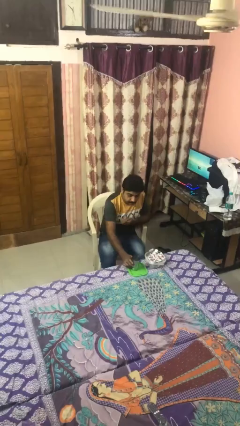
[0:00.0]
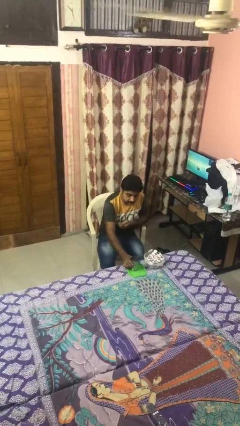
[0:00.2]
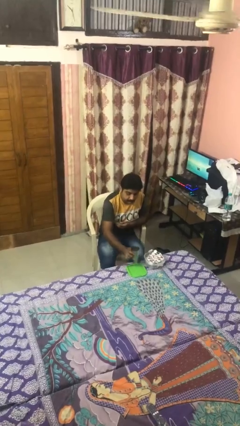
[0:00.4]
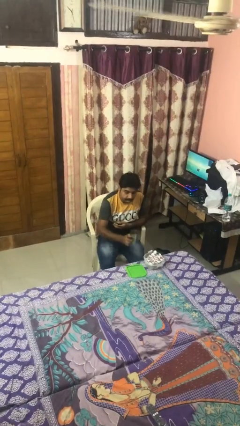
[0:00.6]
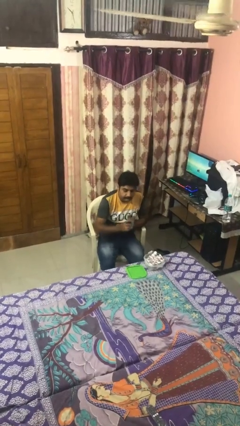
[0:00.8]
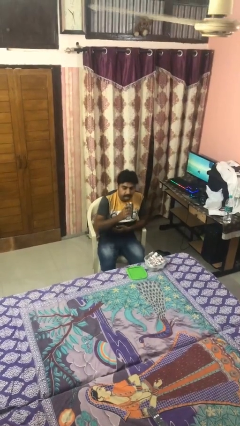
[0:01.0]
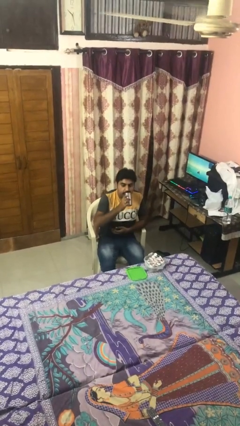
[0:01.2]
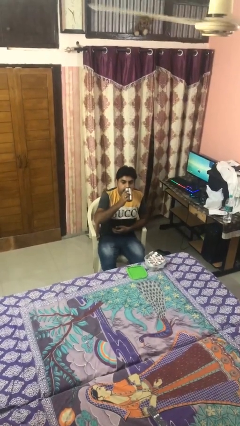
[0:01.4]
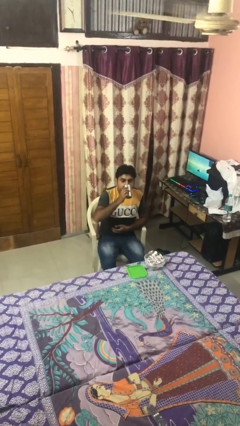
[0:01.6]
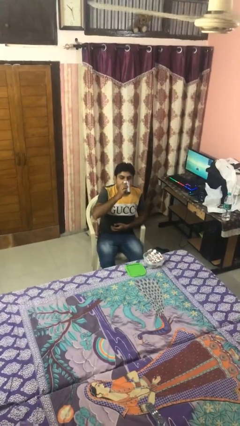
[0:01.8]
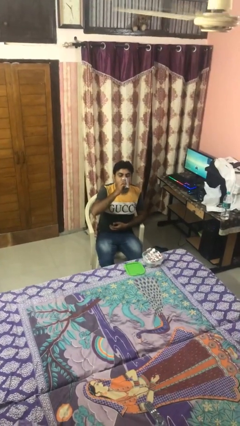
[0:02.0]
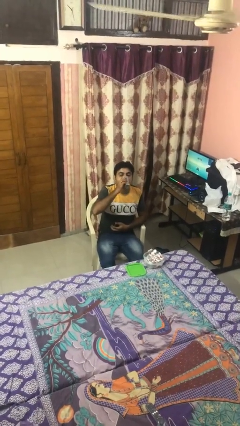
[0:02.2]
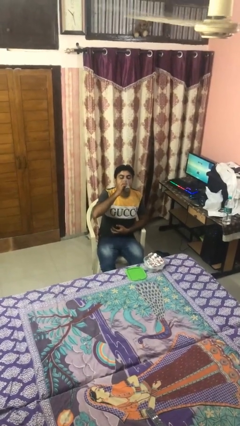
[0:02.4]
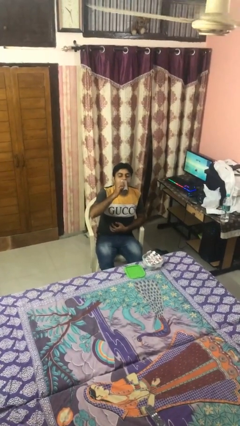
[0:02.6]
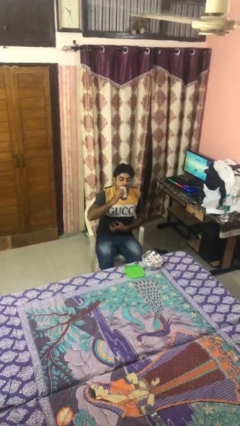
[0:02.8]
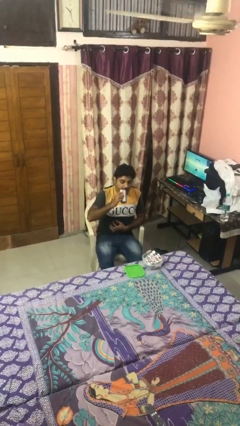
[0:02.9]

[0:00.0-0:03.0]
person drinks from cup

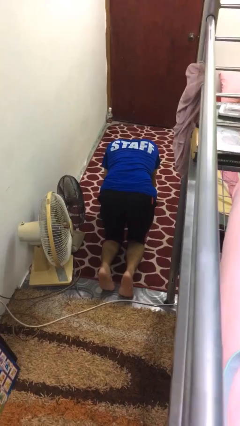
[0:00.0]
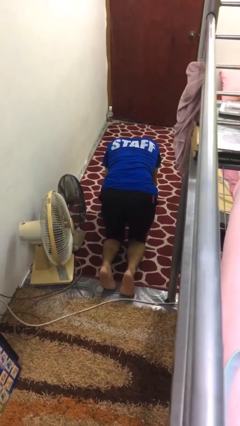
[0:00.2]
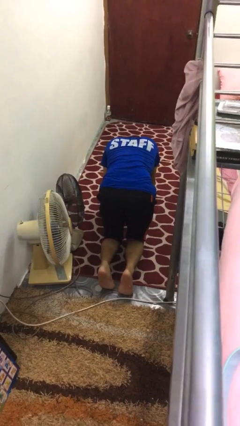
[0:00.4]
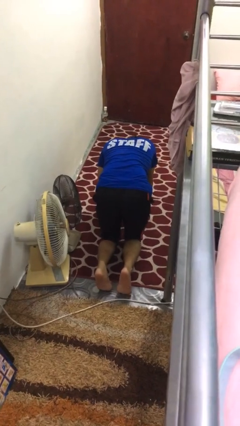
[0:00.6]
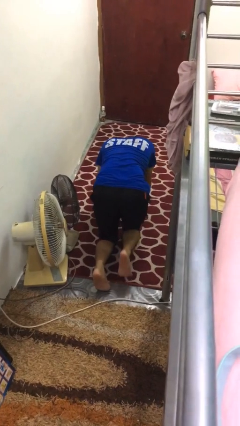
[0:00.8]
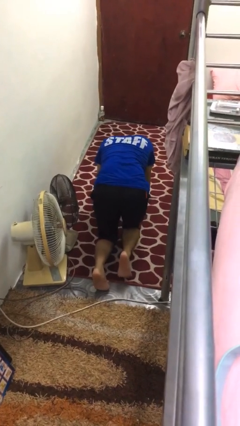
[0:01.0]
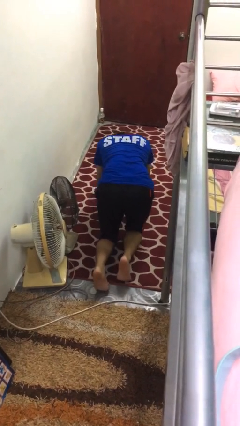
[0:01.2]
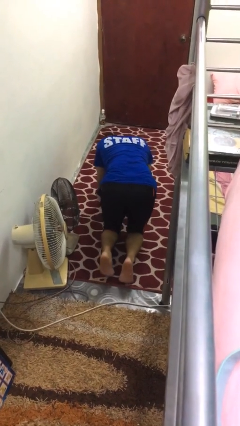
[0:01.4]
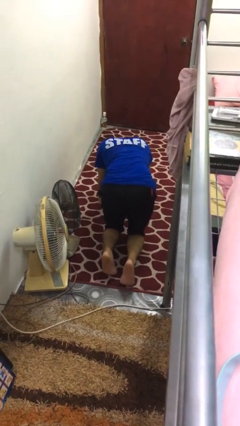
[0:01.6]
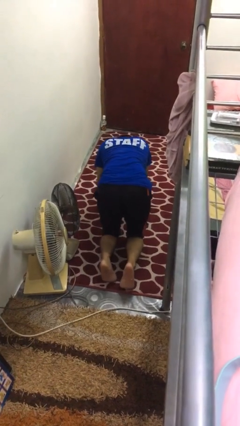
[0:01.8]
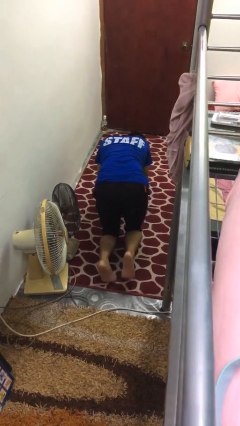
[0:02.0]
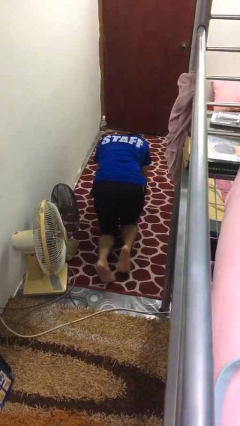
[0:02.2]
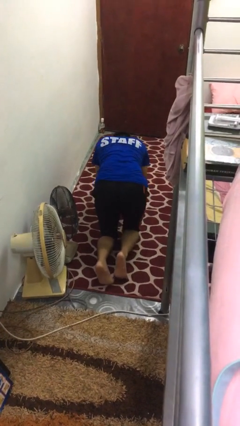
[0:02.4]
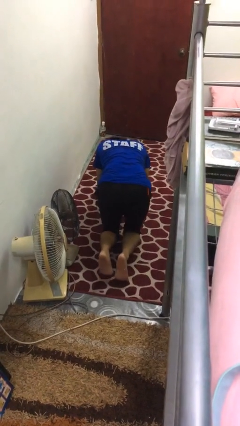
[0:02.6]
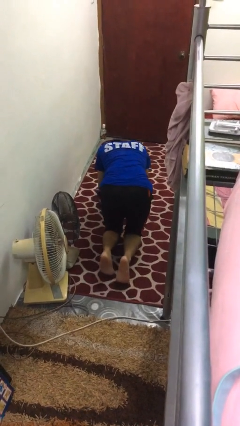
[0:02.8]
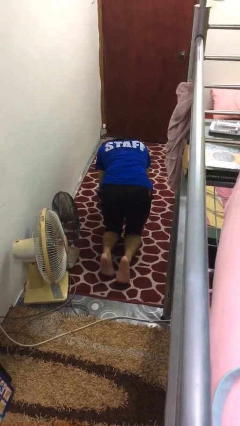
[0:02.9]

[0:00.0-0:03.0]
person crawls

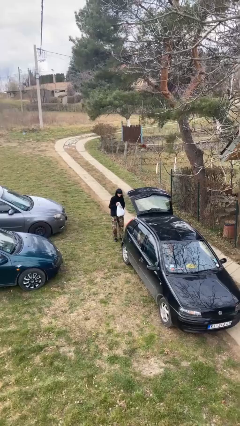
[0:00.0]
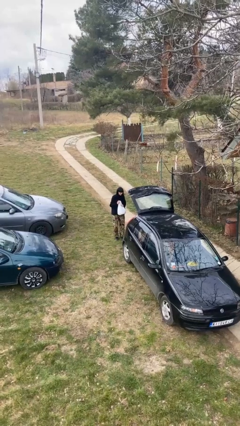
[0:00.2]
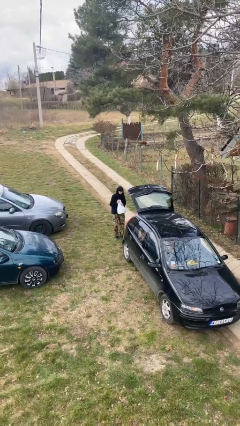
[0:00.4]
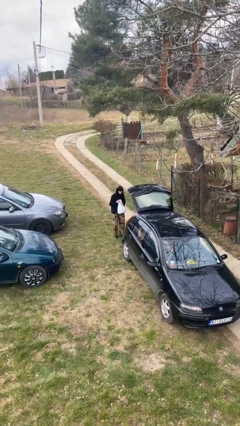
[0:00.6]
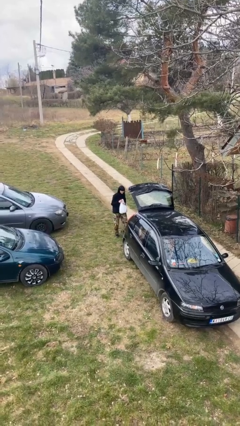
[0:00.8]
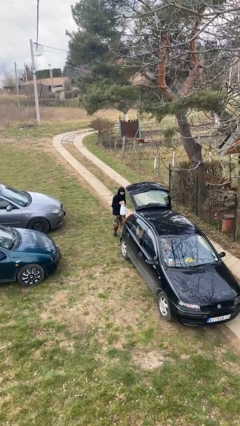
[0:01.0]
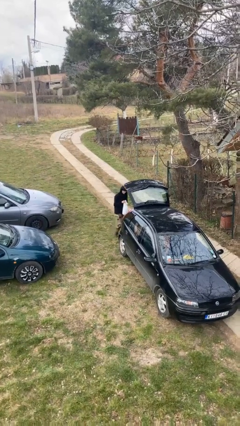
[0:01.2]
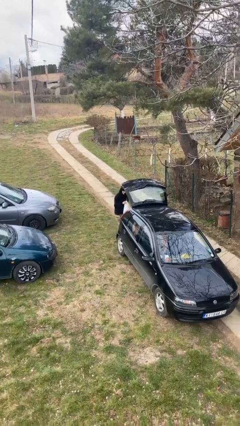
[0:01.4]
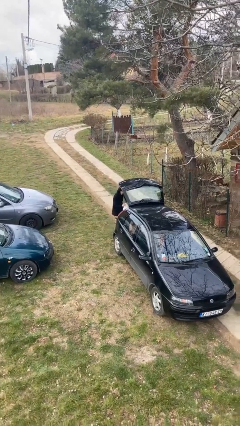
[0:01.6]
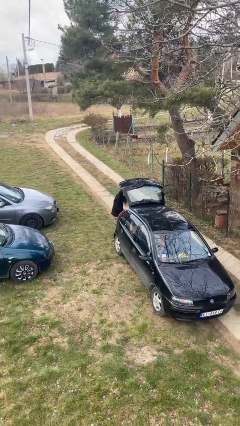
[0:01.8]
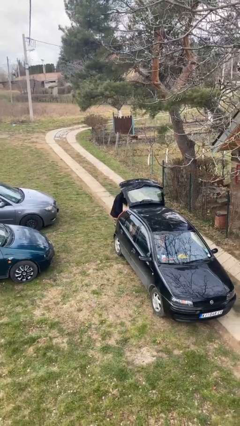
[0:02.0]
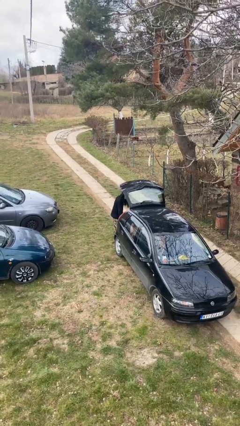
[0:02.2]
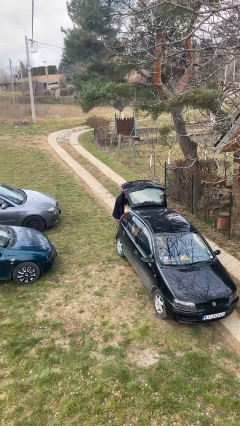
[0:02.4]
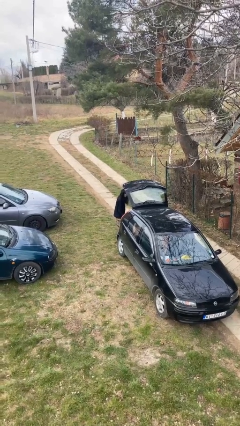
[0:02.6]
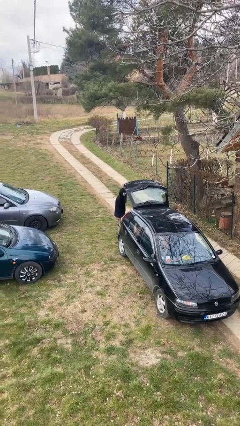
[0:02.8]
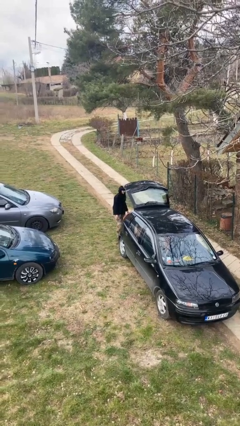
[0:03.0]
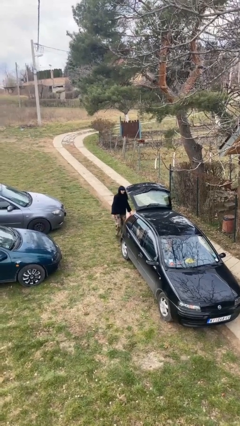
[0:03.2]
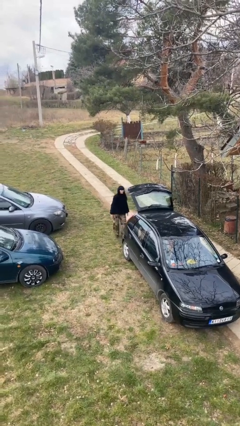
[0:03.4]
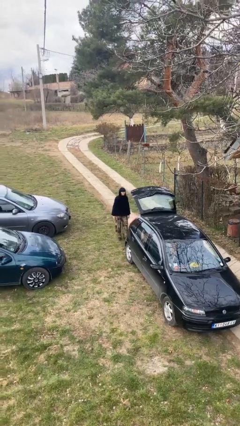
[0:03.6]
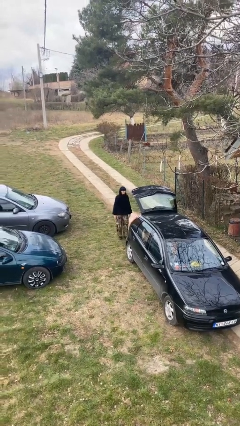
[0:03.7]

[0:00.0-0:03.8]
person loads car

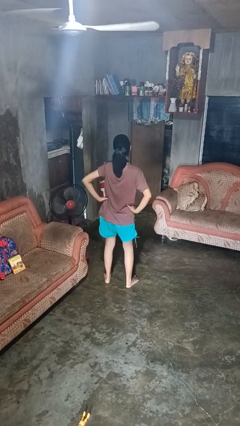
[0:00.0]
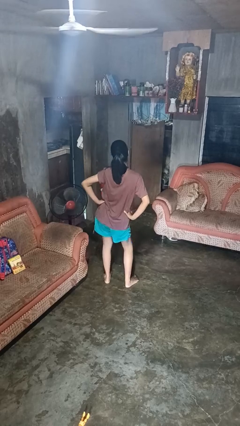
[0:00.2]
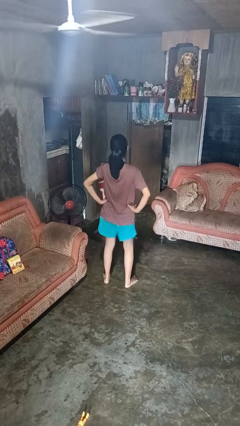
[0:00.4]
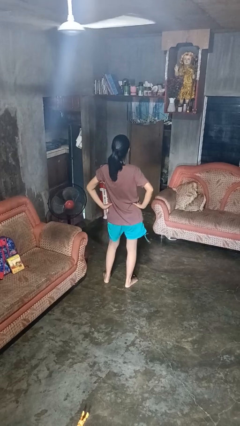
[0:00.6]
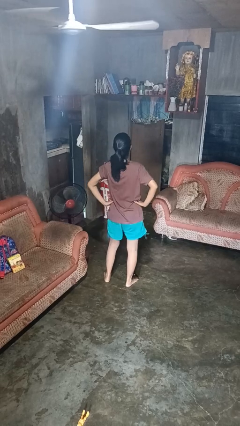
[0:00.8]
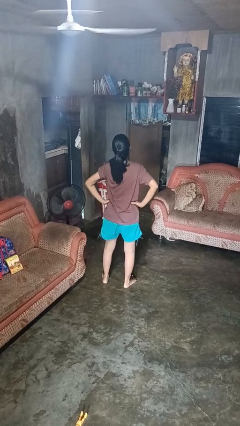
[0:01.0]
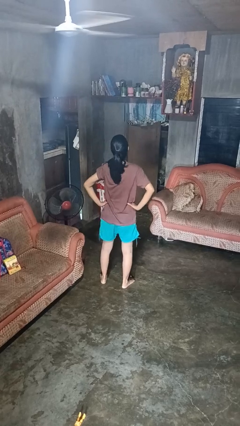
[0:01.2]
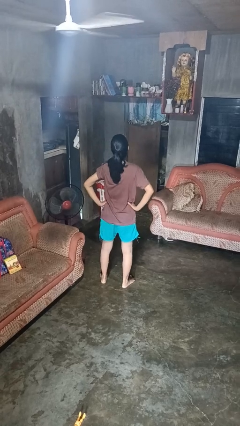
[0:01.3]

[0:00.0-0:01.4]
person dances in place

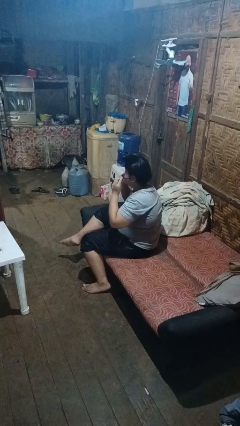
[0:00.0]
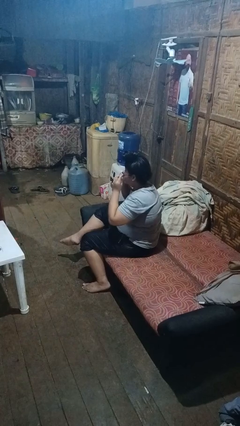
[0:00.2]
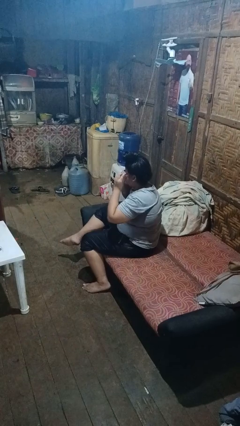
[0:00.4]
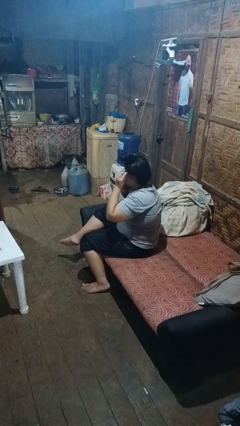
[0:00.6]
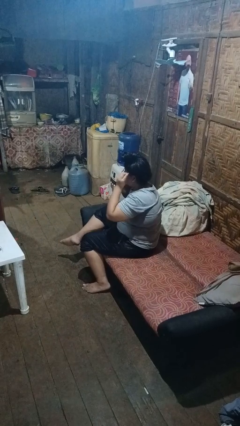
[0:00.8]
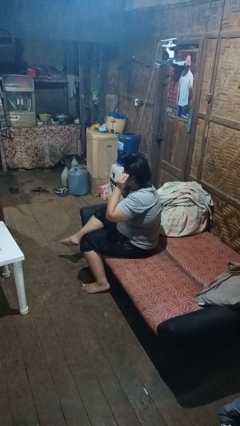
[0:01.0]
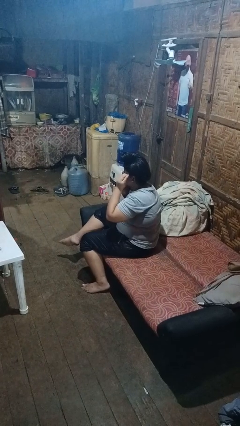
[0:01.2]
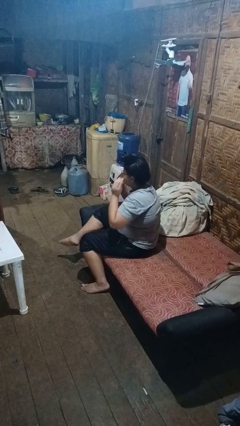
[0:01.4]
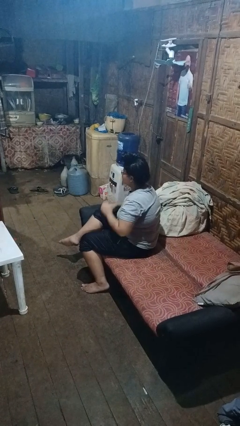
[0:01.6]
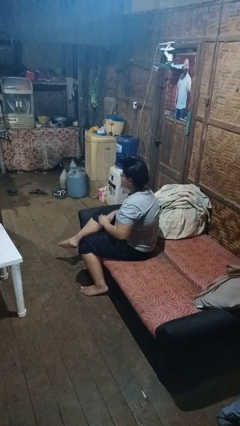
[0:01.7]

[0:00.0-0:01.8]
person puts on glasses

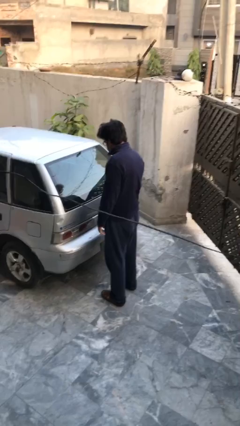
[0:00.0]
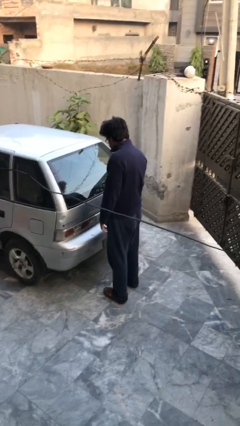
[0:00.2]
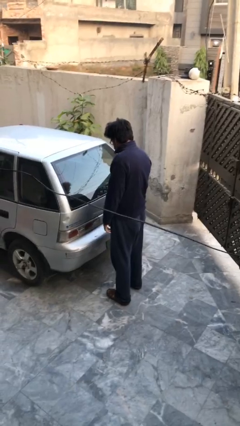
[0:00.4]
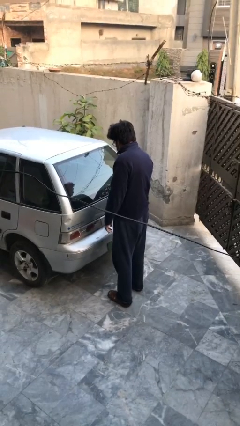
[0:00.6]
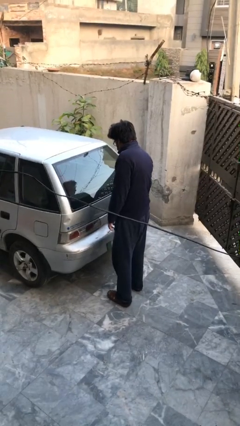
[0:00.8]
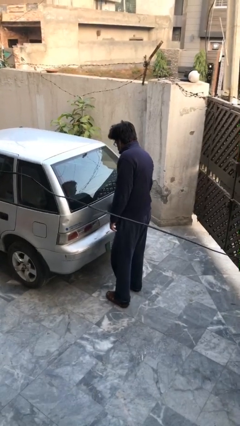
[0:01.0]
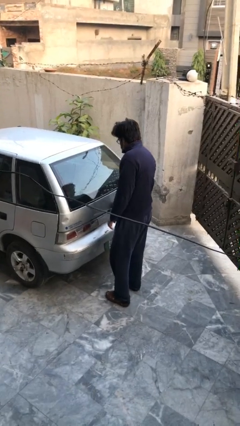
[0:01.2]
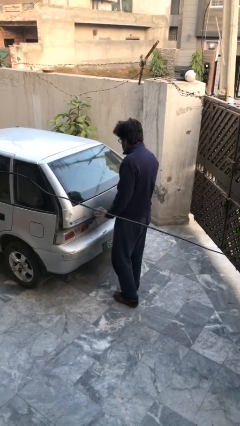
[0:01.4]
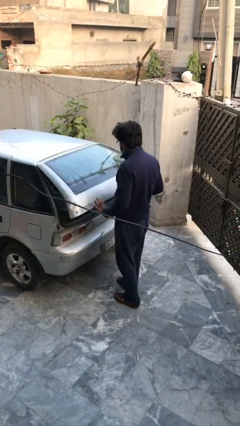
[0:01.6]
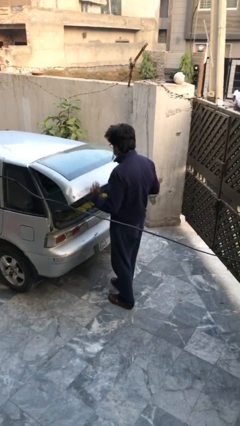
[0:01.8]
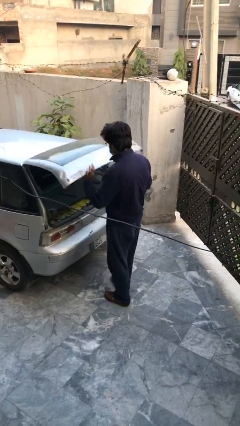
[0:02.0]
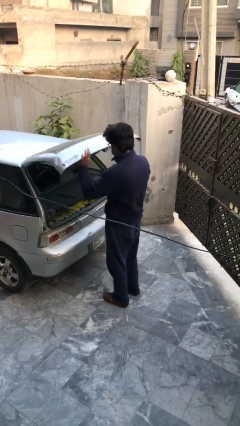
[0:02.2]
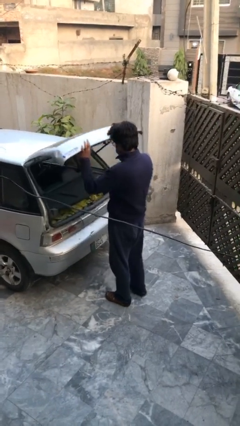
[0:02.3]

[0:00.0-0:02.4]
person opens car trunk

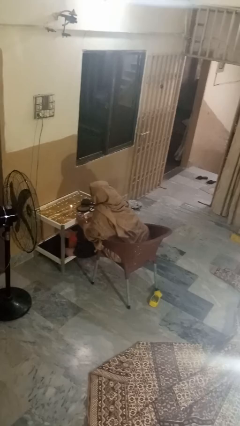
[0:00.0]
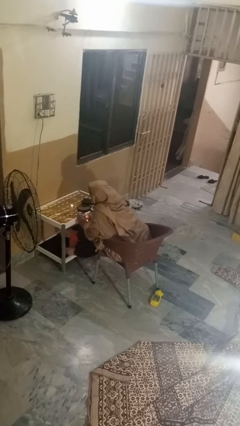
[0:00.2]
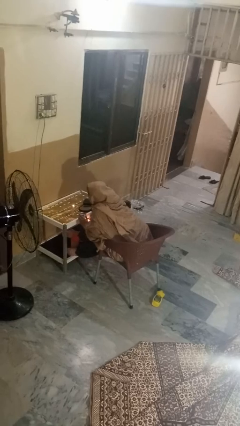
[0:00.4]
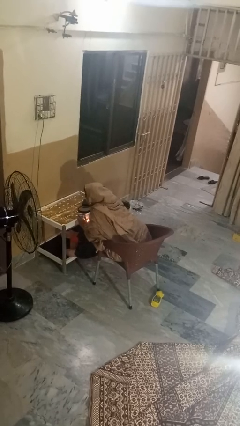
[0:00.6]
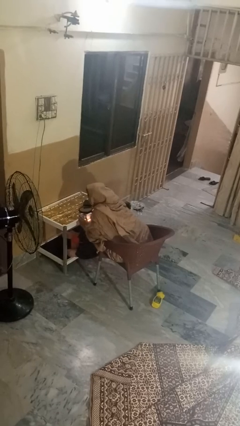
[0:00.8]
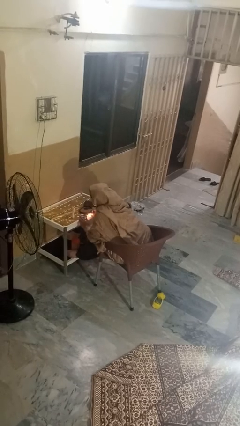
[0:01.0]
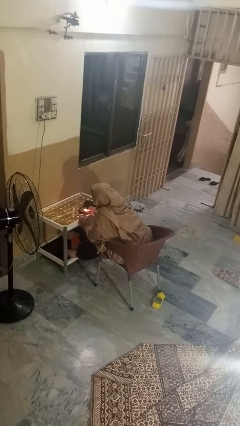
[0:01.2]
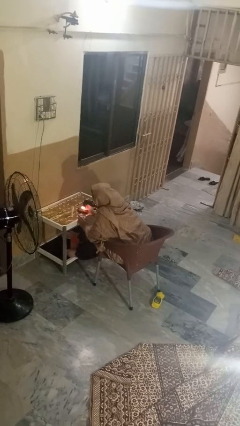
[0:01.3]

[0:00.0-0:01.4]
person extinguishes candle

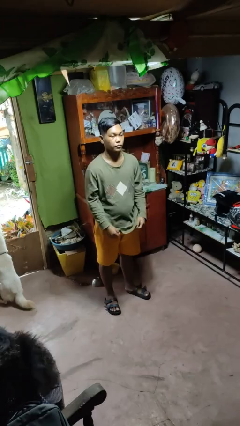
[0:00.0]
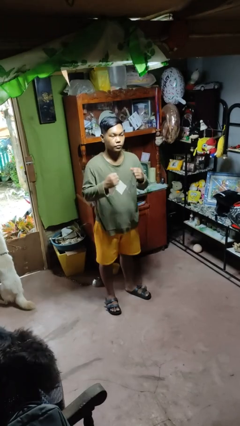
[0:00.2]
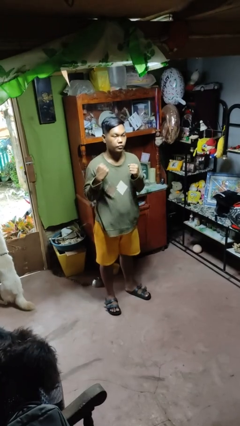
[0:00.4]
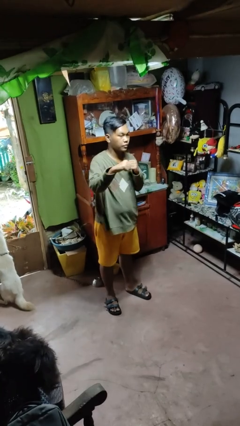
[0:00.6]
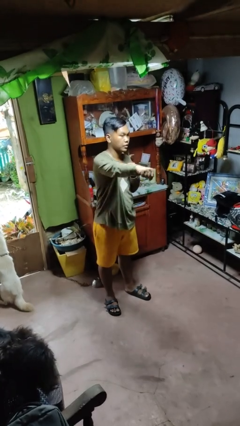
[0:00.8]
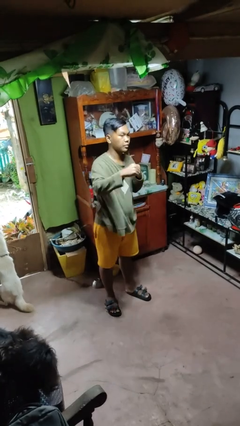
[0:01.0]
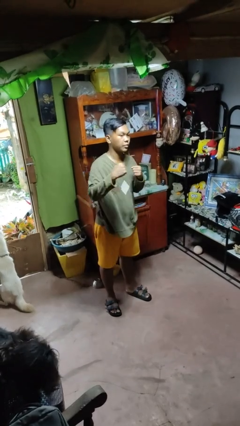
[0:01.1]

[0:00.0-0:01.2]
person punches
